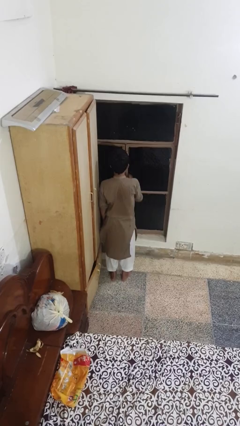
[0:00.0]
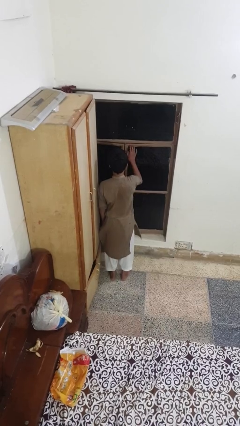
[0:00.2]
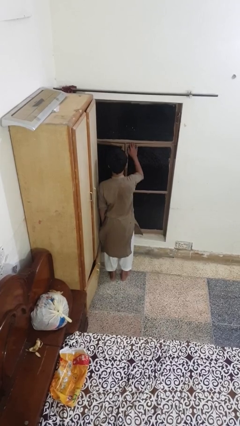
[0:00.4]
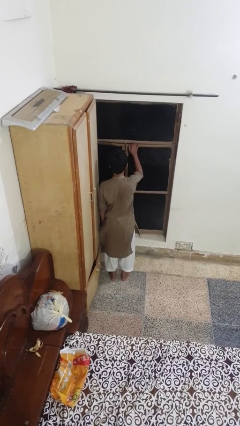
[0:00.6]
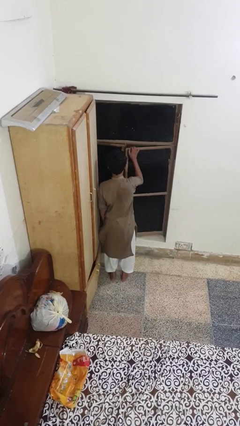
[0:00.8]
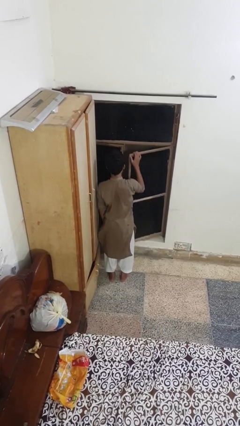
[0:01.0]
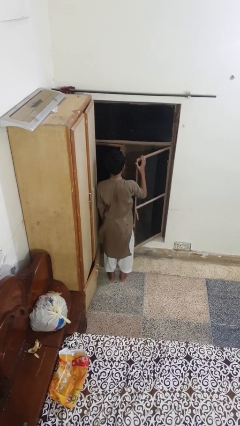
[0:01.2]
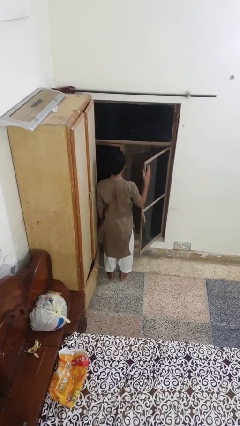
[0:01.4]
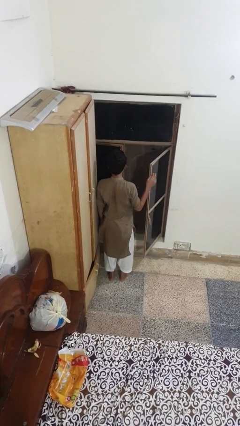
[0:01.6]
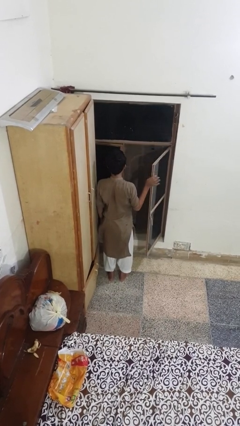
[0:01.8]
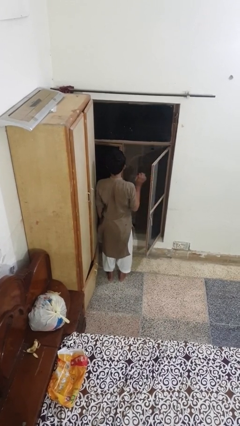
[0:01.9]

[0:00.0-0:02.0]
person opens home window

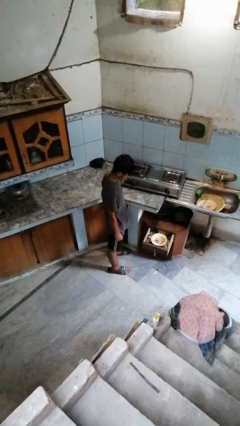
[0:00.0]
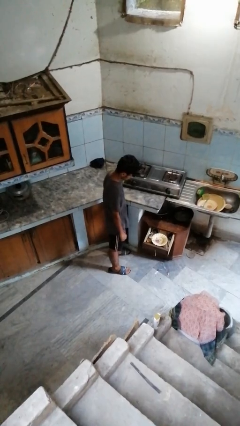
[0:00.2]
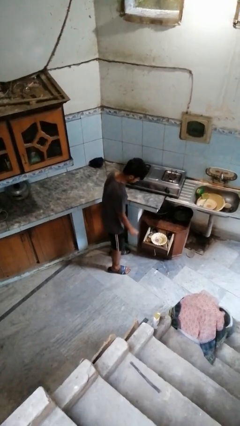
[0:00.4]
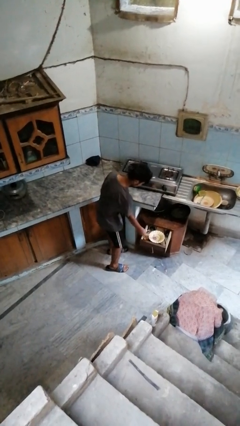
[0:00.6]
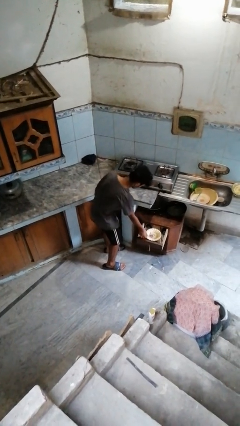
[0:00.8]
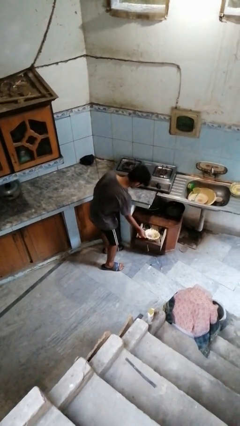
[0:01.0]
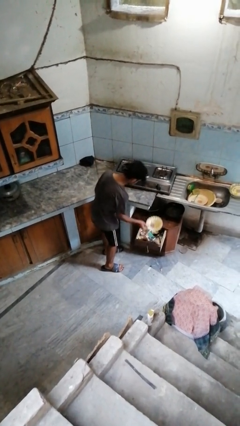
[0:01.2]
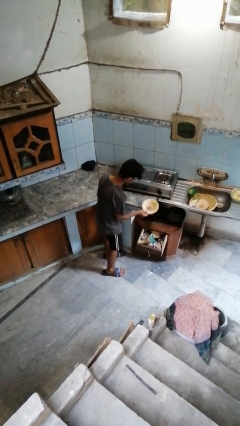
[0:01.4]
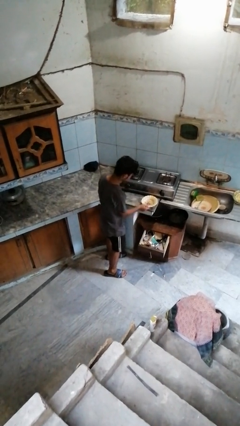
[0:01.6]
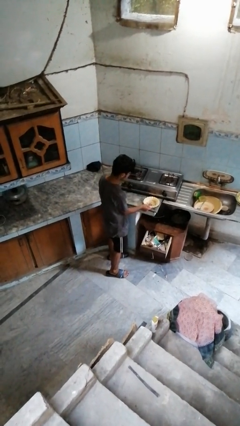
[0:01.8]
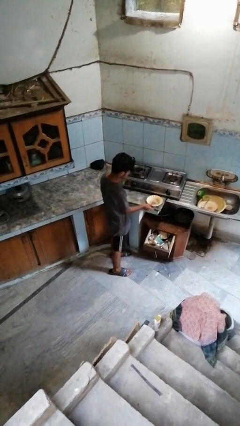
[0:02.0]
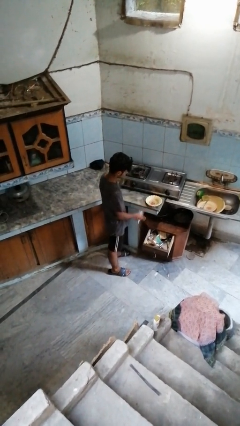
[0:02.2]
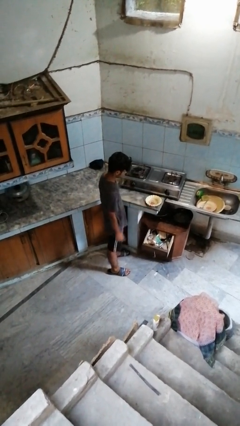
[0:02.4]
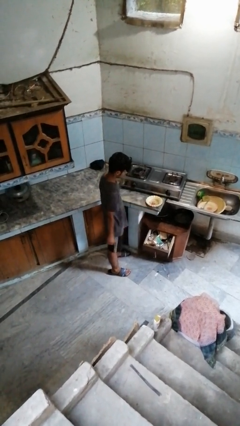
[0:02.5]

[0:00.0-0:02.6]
person takes object from kitchen drawer

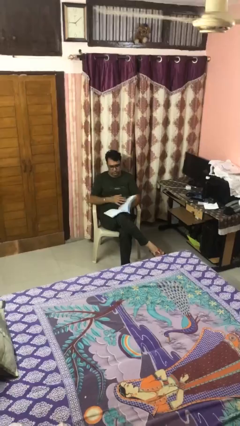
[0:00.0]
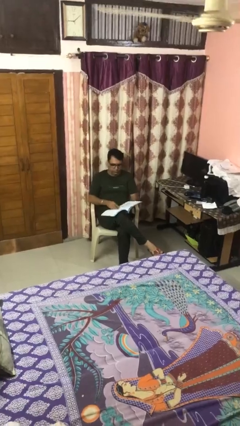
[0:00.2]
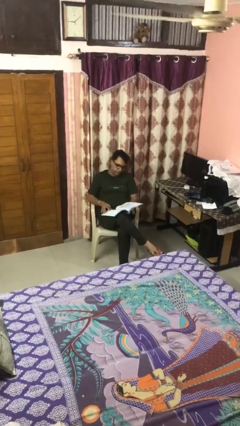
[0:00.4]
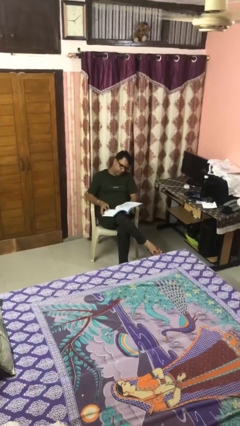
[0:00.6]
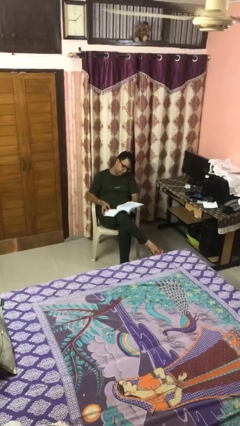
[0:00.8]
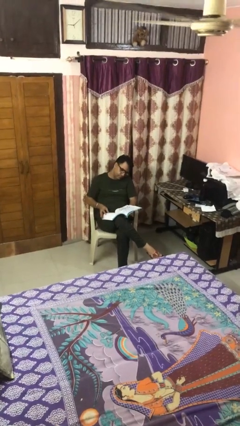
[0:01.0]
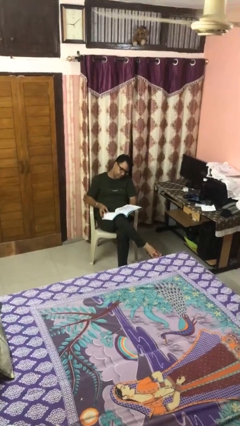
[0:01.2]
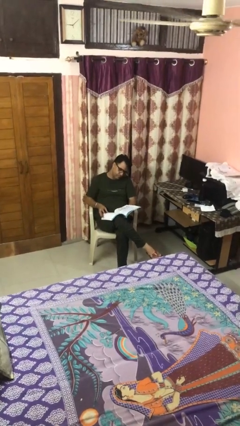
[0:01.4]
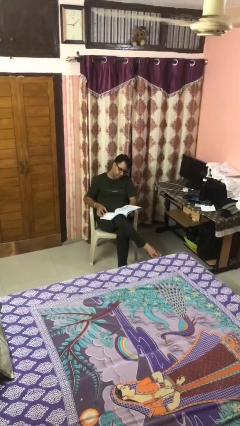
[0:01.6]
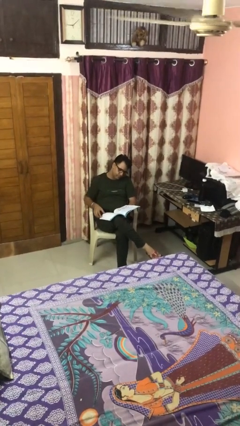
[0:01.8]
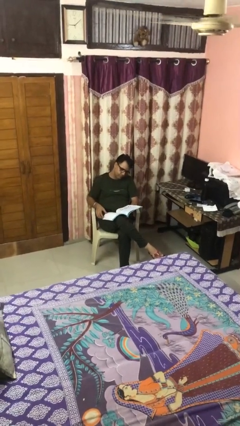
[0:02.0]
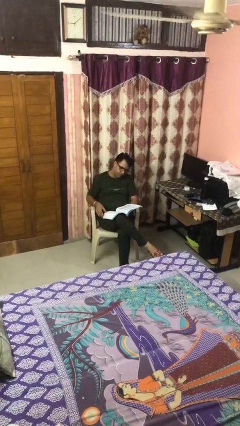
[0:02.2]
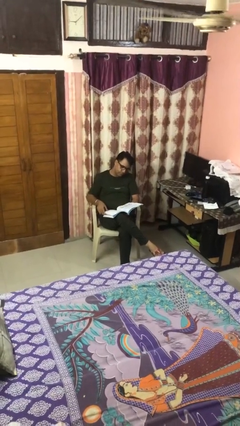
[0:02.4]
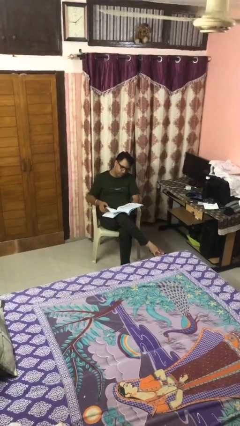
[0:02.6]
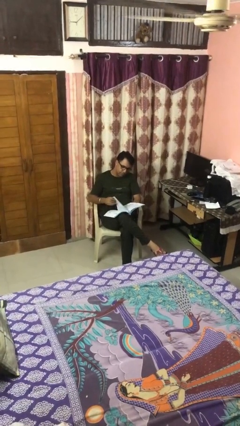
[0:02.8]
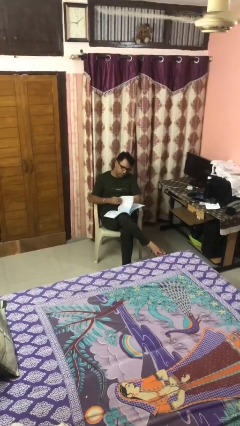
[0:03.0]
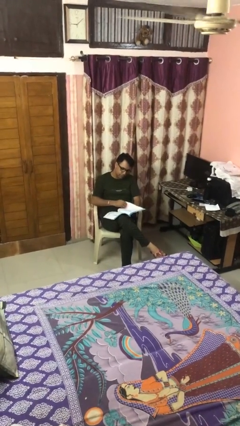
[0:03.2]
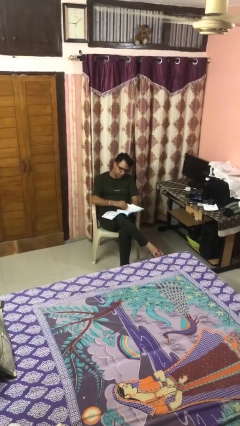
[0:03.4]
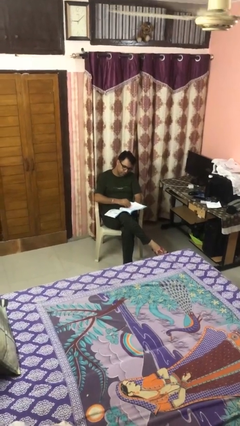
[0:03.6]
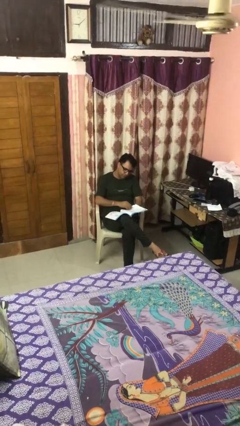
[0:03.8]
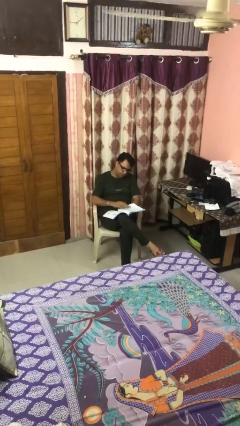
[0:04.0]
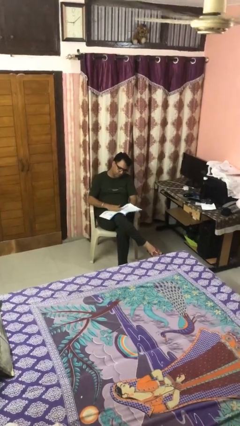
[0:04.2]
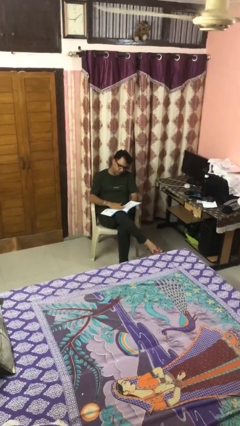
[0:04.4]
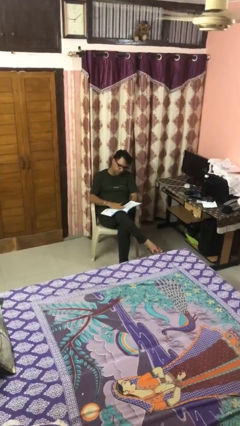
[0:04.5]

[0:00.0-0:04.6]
person reads book

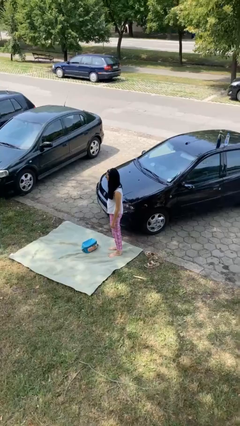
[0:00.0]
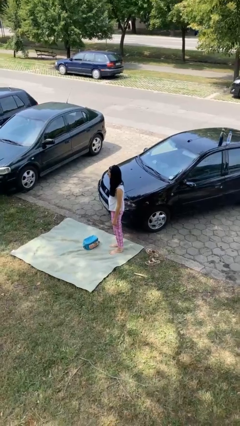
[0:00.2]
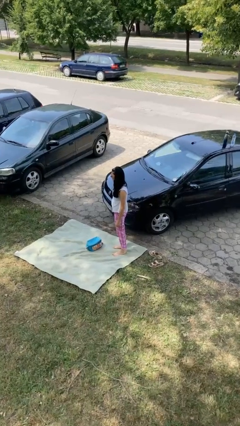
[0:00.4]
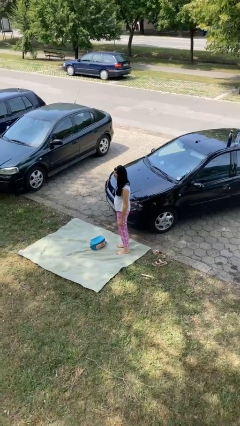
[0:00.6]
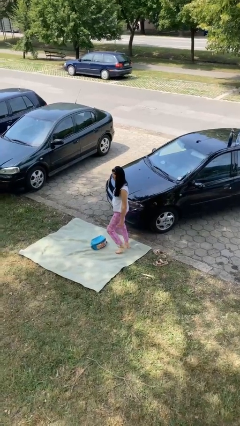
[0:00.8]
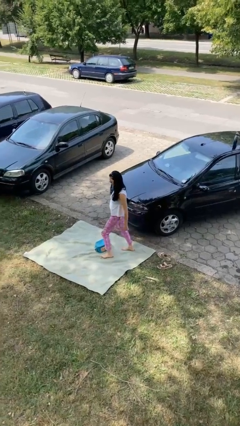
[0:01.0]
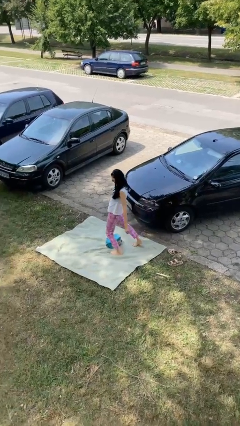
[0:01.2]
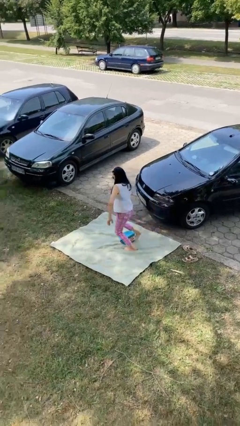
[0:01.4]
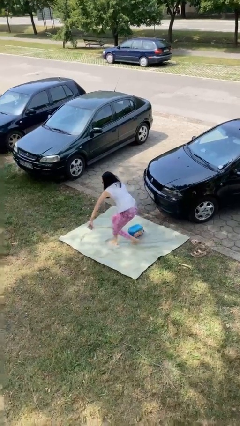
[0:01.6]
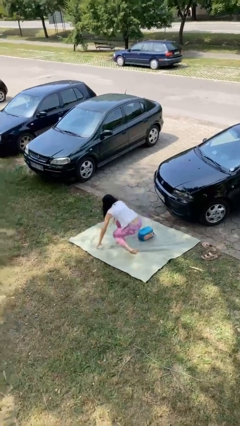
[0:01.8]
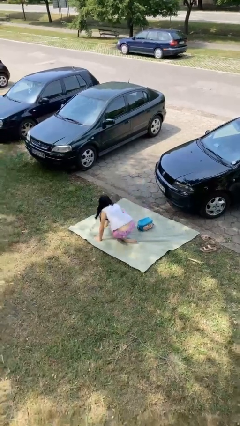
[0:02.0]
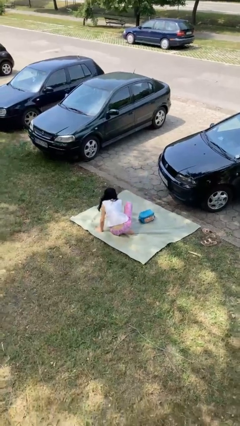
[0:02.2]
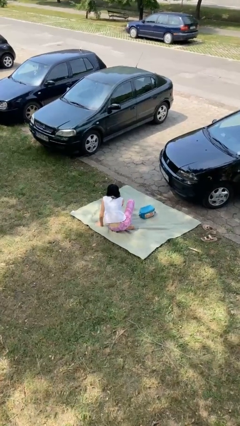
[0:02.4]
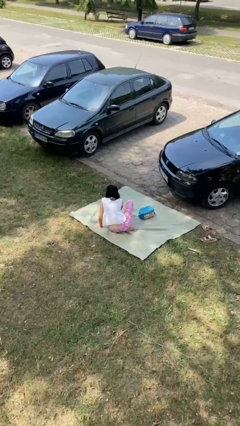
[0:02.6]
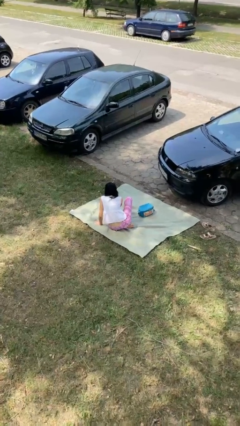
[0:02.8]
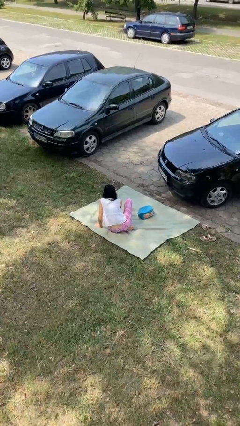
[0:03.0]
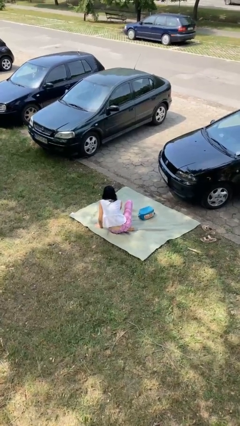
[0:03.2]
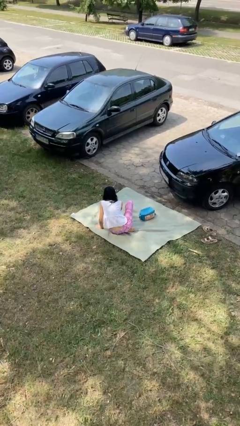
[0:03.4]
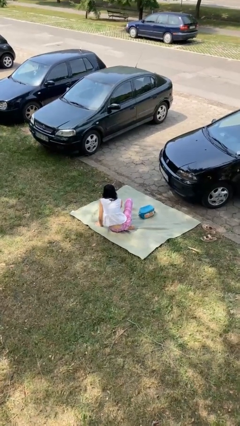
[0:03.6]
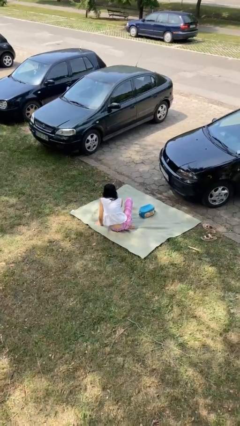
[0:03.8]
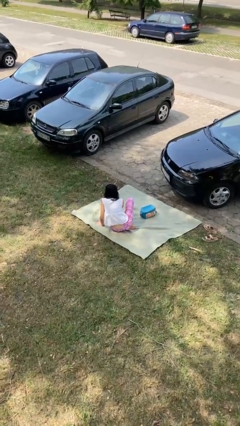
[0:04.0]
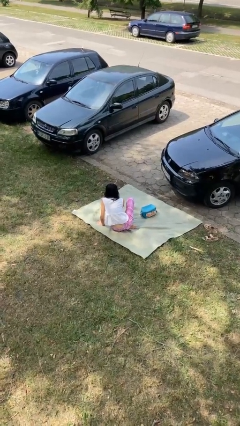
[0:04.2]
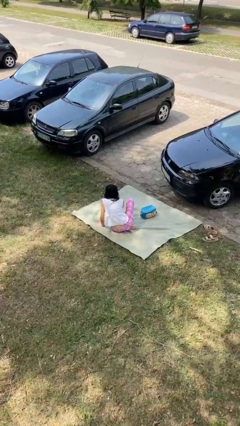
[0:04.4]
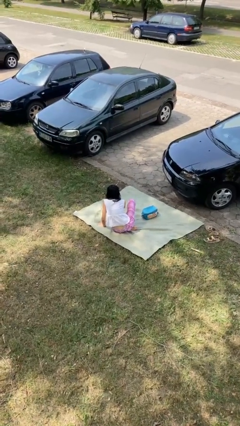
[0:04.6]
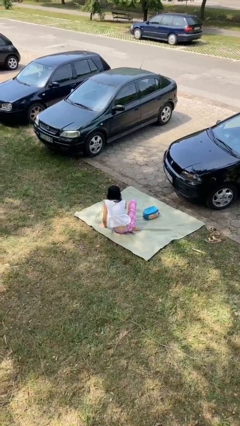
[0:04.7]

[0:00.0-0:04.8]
person trips on object on floor

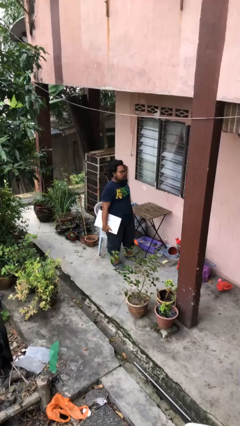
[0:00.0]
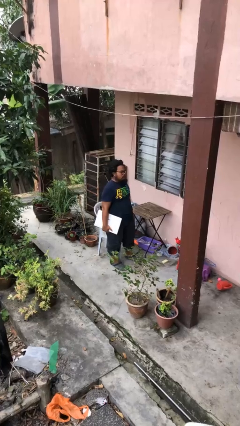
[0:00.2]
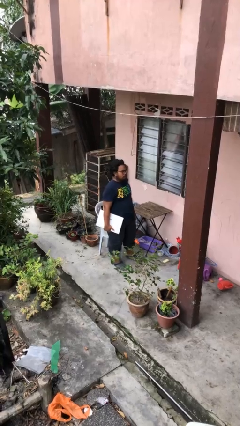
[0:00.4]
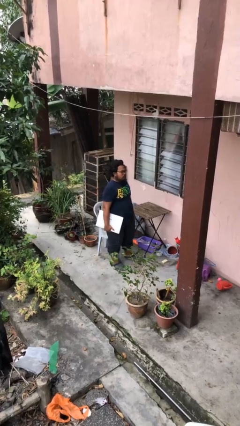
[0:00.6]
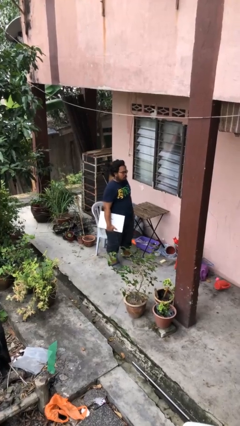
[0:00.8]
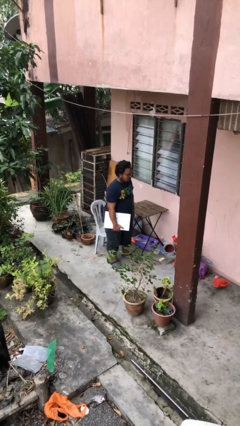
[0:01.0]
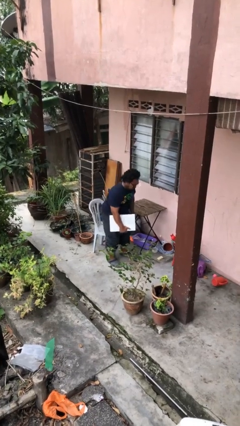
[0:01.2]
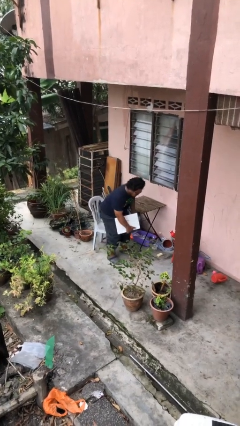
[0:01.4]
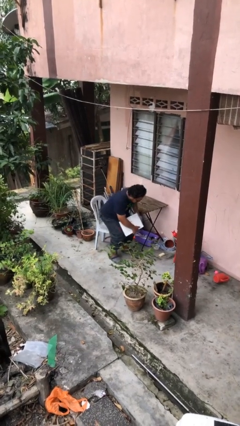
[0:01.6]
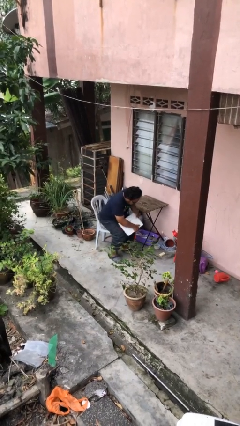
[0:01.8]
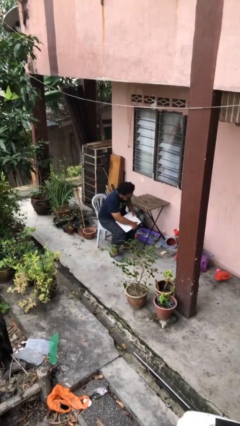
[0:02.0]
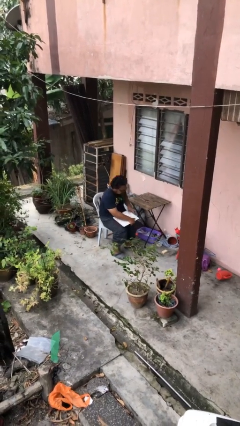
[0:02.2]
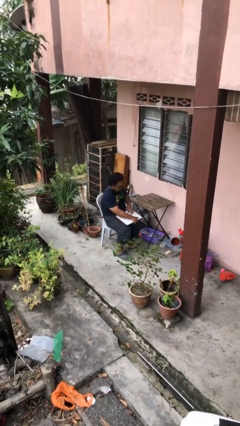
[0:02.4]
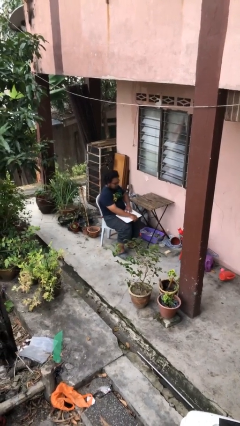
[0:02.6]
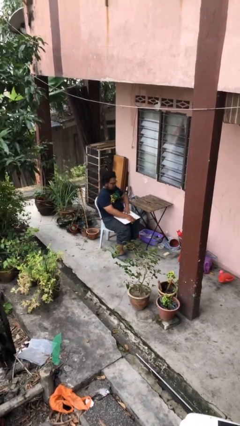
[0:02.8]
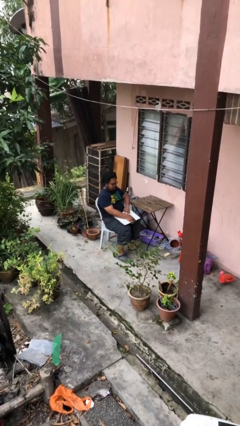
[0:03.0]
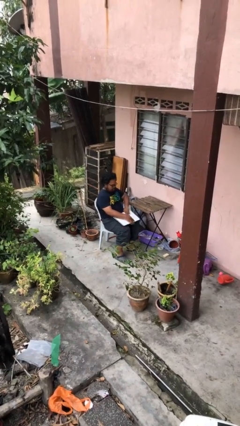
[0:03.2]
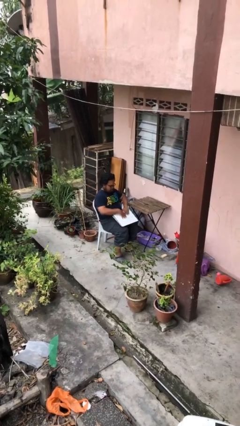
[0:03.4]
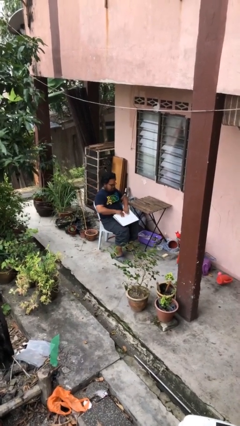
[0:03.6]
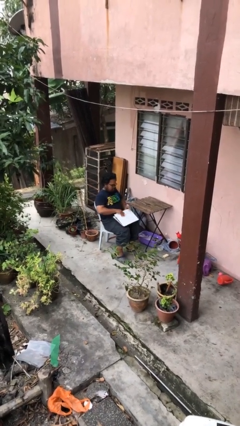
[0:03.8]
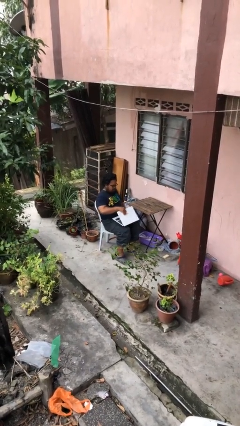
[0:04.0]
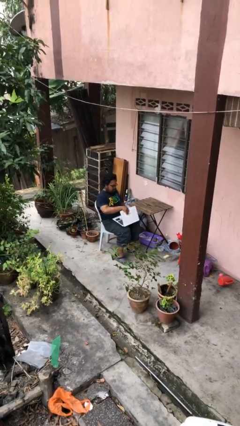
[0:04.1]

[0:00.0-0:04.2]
person sits down
